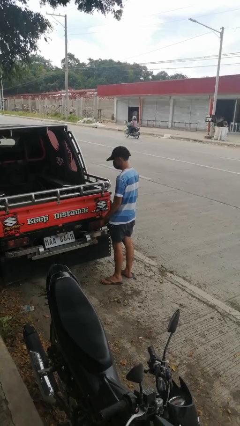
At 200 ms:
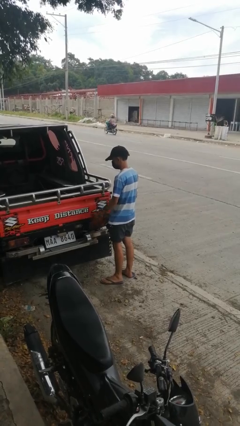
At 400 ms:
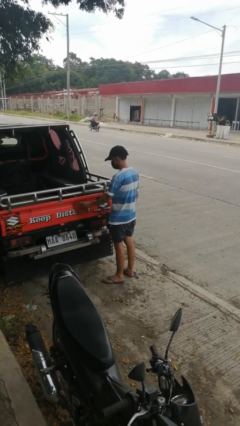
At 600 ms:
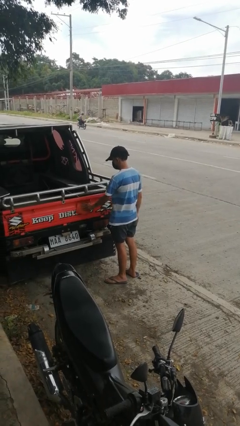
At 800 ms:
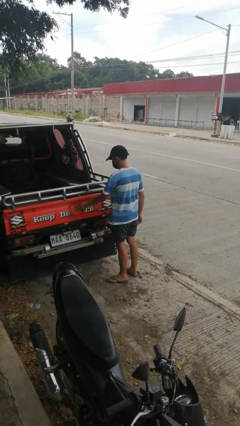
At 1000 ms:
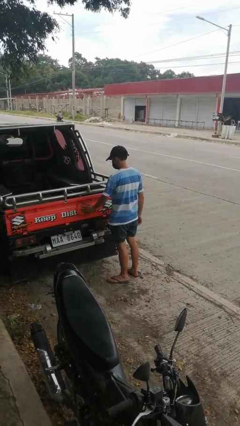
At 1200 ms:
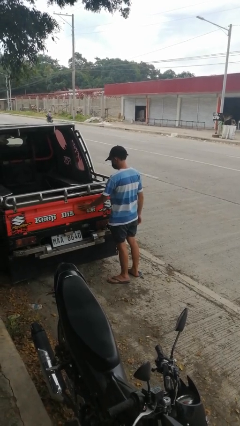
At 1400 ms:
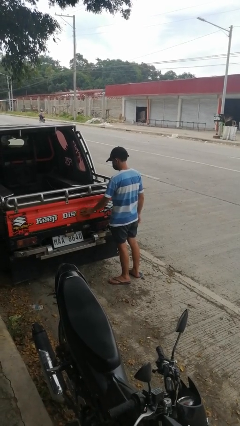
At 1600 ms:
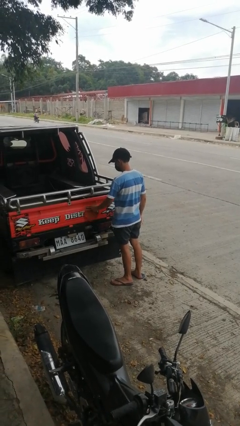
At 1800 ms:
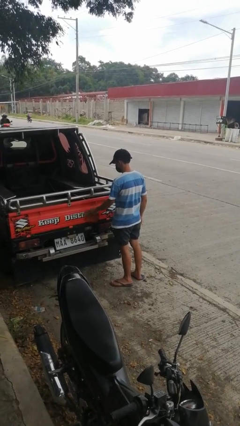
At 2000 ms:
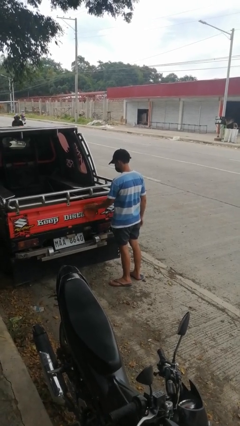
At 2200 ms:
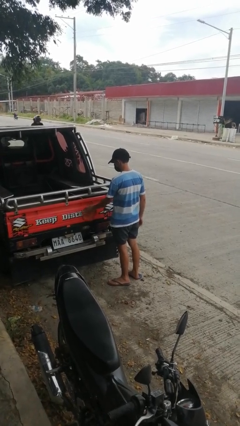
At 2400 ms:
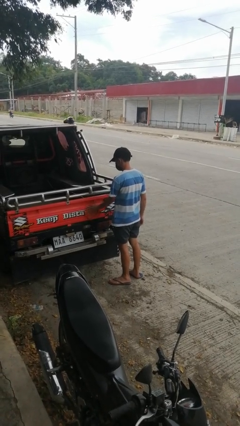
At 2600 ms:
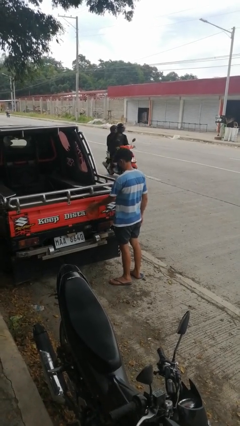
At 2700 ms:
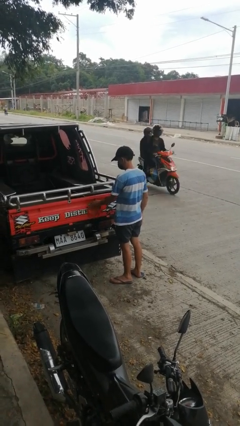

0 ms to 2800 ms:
person polishes car with rag

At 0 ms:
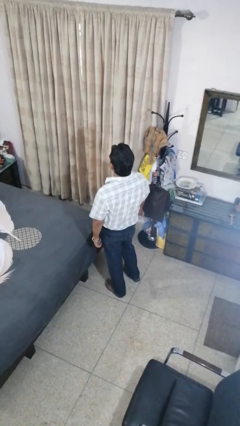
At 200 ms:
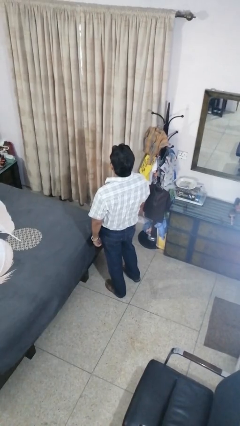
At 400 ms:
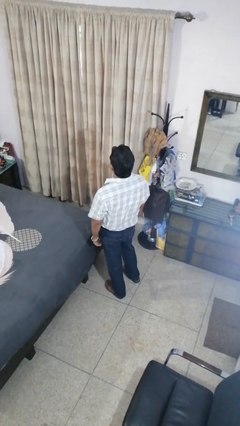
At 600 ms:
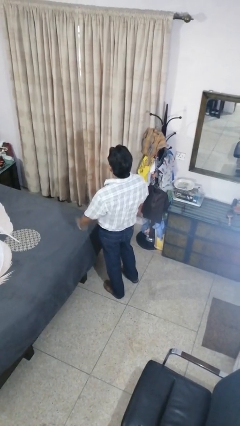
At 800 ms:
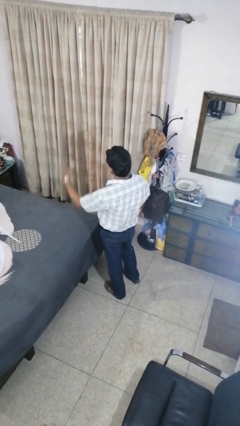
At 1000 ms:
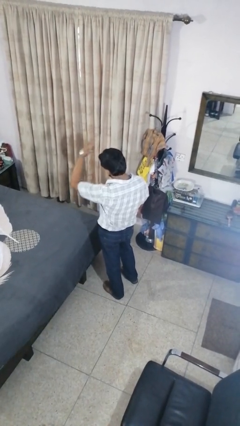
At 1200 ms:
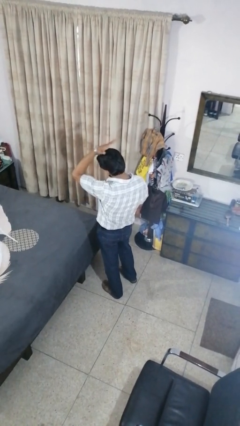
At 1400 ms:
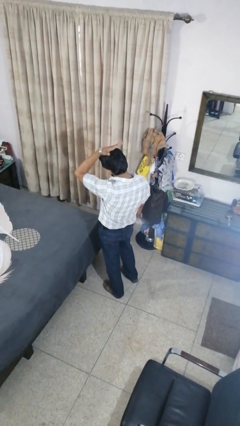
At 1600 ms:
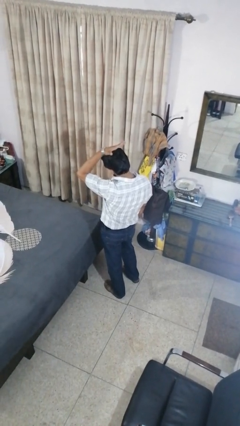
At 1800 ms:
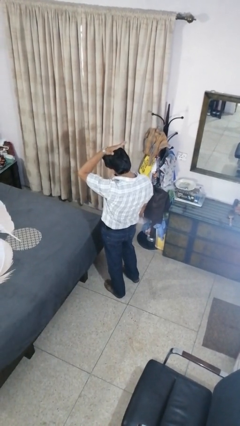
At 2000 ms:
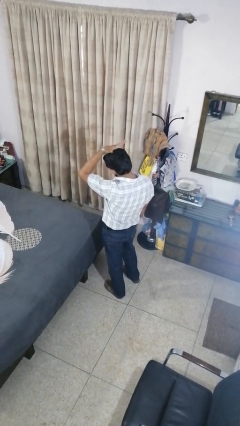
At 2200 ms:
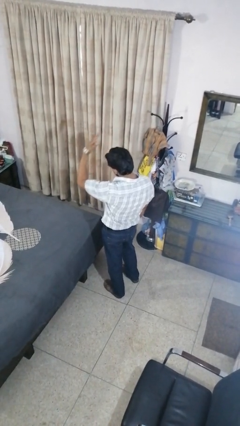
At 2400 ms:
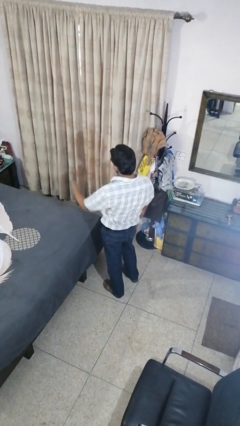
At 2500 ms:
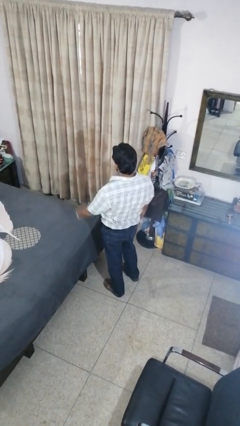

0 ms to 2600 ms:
person pats head

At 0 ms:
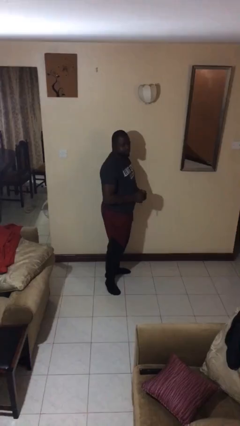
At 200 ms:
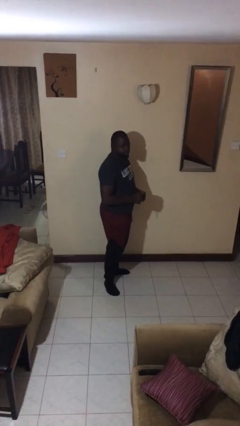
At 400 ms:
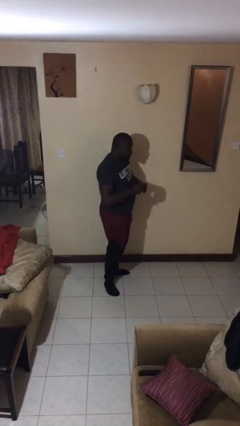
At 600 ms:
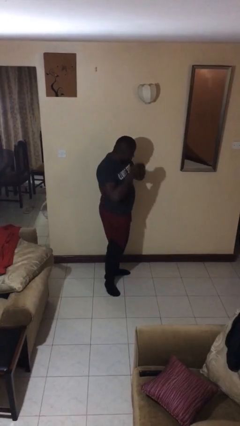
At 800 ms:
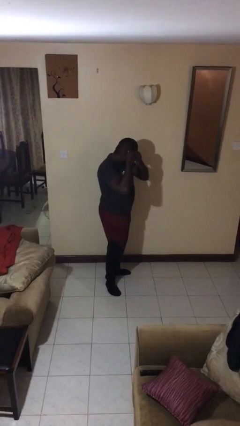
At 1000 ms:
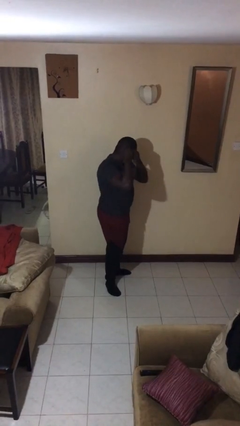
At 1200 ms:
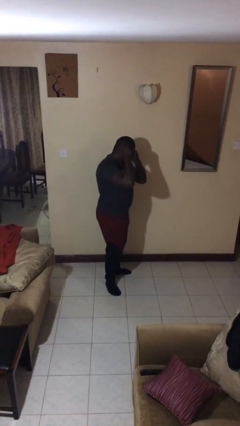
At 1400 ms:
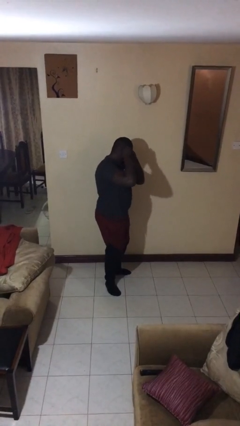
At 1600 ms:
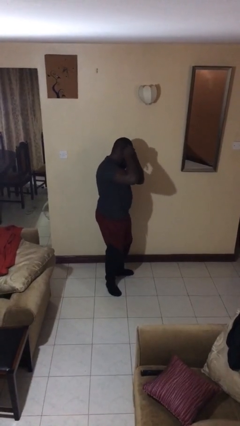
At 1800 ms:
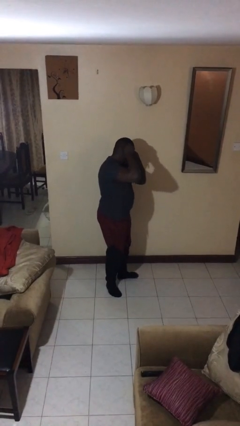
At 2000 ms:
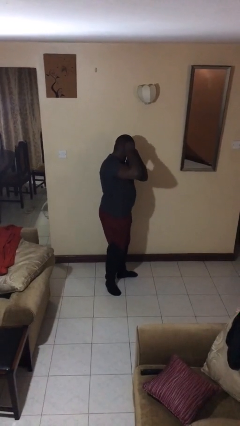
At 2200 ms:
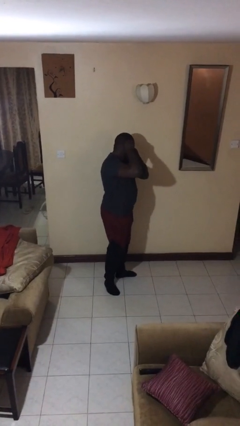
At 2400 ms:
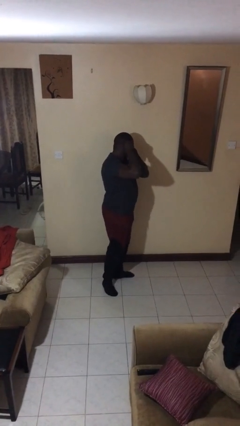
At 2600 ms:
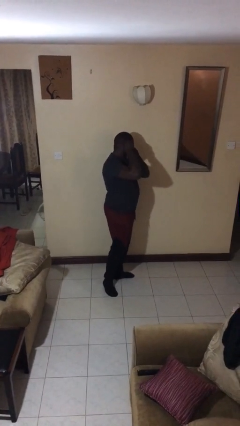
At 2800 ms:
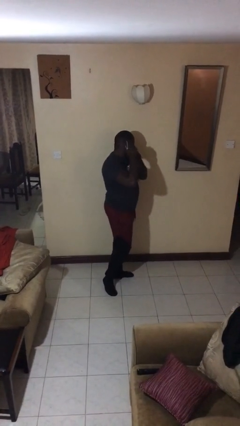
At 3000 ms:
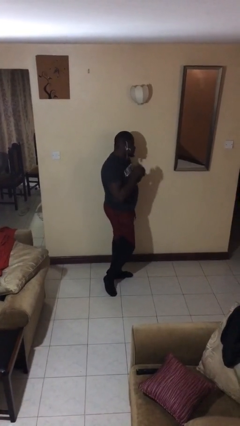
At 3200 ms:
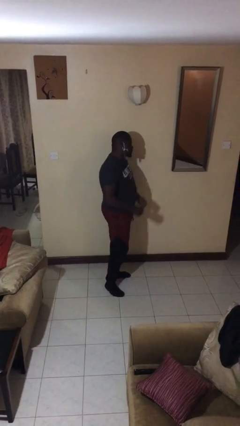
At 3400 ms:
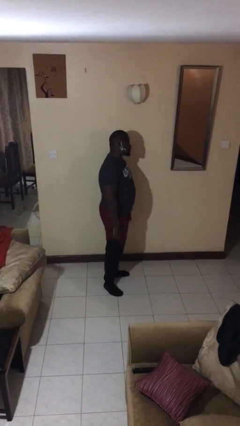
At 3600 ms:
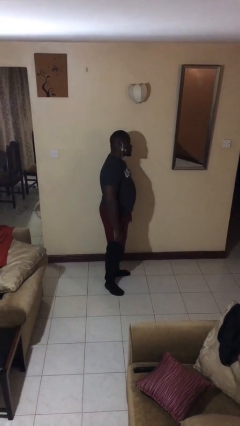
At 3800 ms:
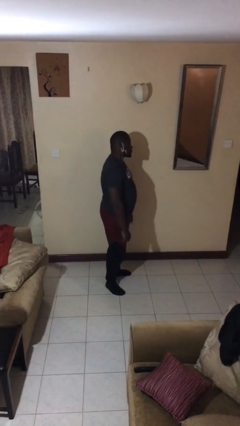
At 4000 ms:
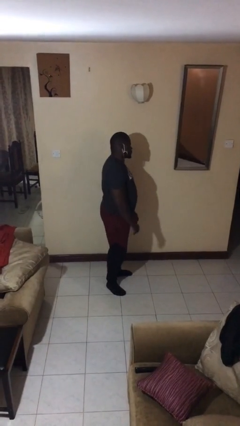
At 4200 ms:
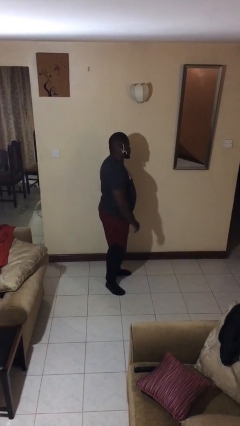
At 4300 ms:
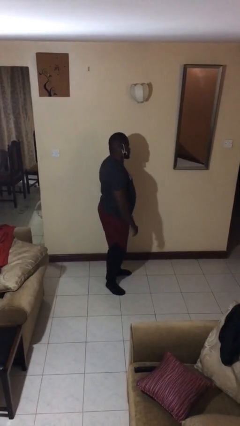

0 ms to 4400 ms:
person puts on earrings

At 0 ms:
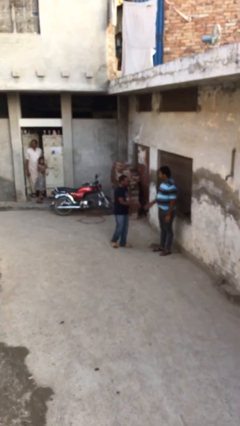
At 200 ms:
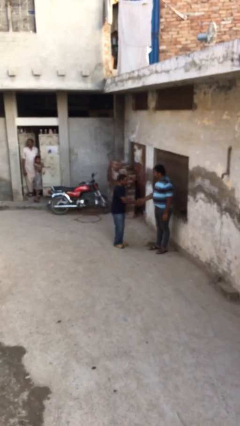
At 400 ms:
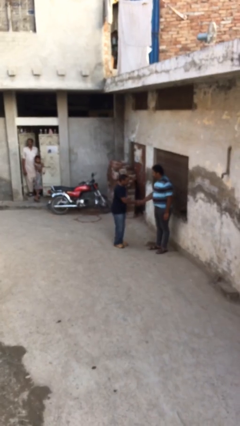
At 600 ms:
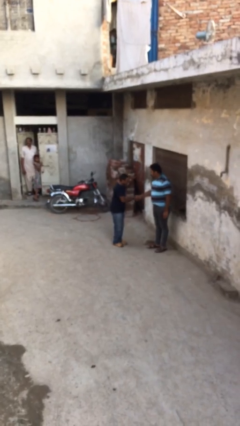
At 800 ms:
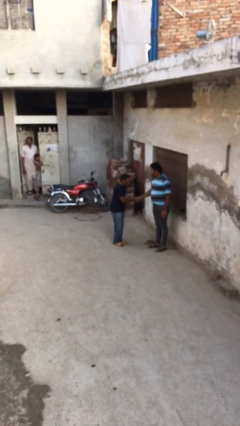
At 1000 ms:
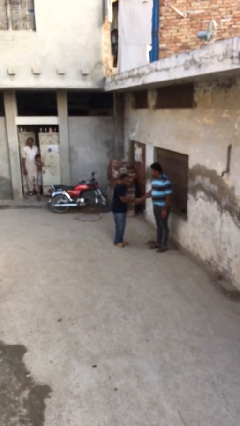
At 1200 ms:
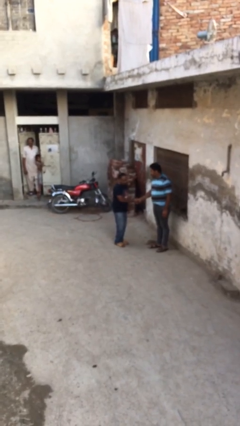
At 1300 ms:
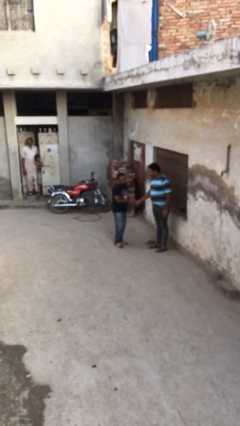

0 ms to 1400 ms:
person shakes hand

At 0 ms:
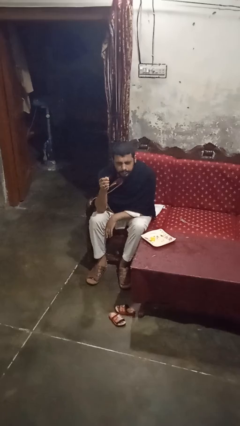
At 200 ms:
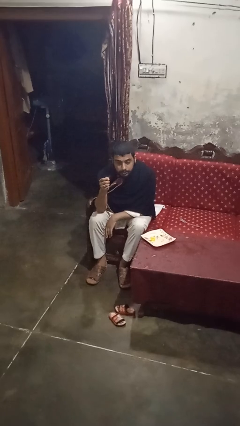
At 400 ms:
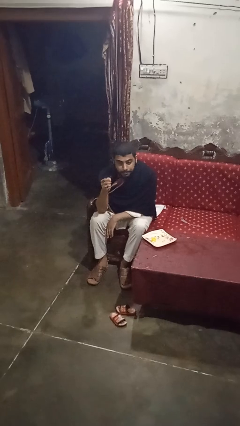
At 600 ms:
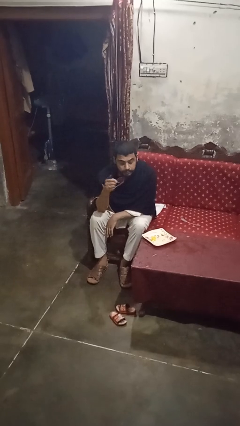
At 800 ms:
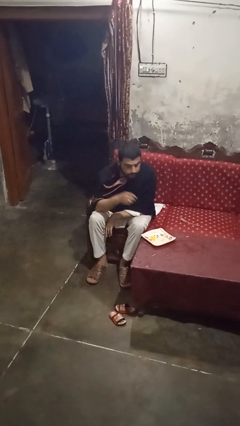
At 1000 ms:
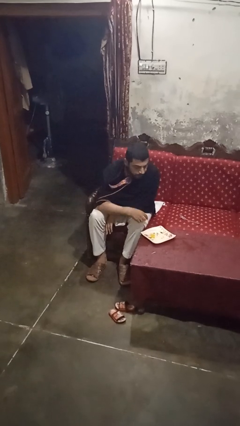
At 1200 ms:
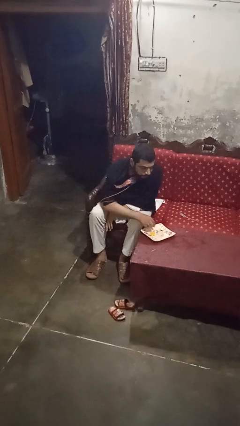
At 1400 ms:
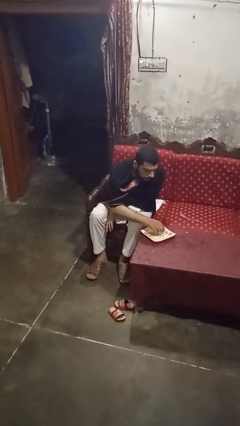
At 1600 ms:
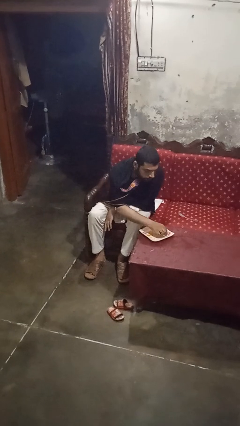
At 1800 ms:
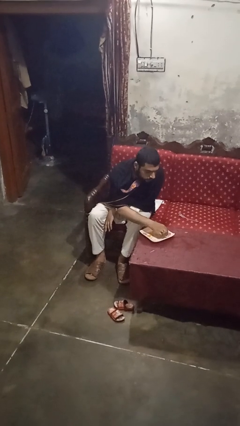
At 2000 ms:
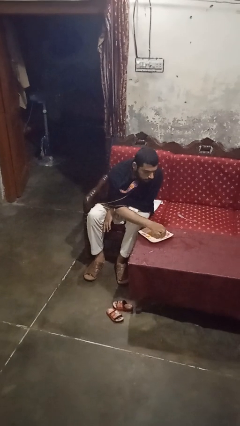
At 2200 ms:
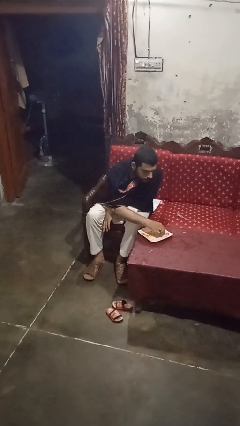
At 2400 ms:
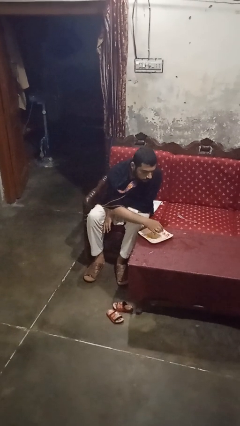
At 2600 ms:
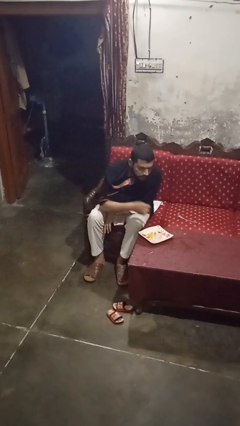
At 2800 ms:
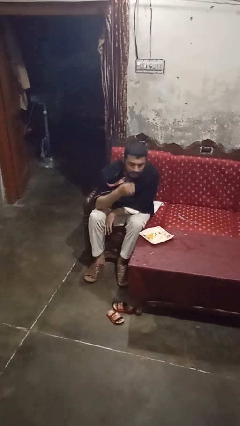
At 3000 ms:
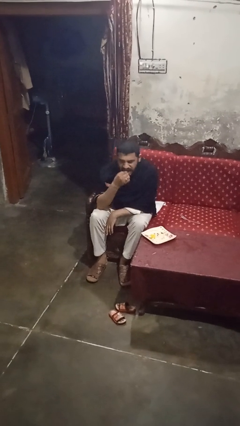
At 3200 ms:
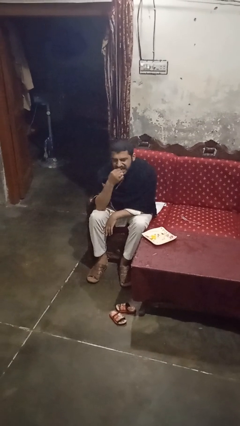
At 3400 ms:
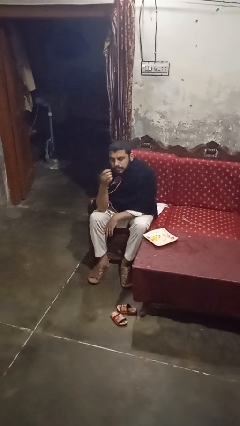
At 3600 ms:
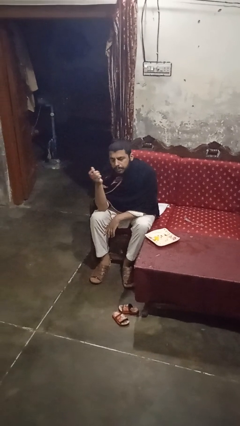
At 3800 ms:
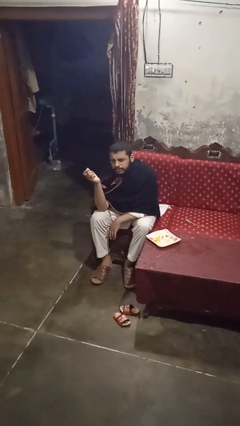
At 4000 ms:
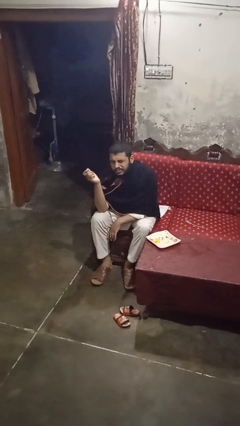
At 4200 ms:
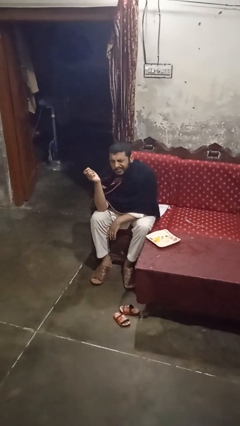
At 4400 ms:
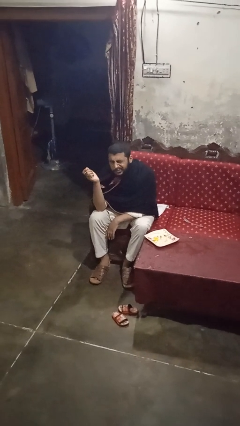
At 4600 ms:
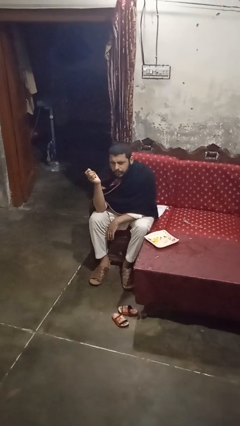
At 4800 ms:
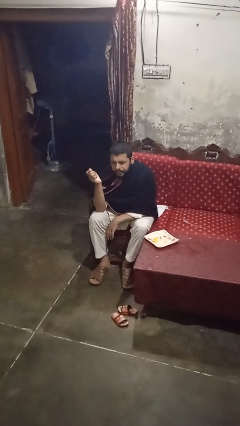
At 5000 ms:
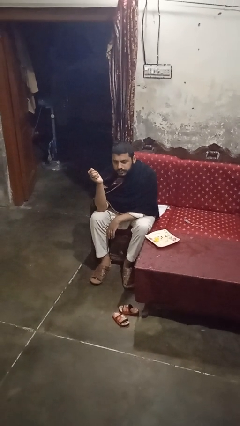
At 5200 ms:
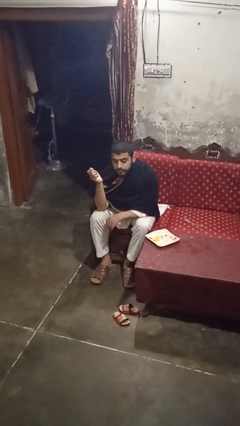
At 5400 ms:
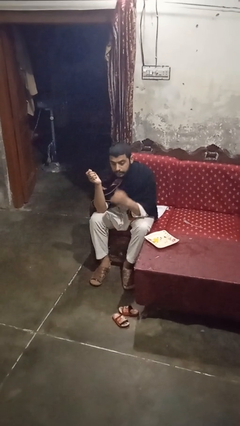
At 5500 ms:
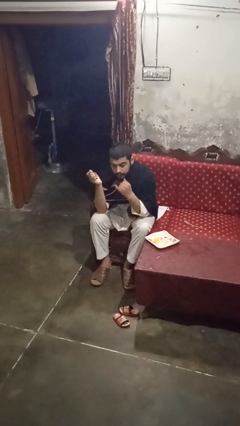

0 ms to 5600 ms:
person eats with hands

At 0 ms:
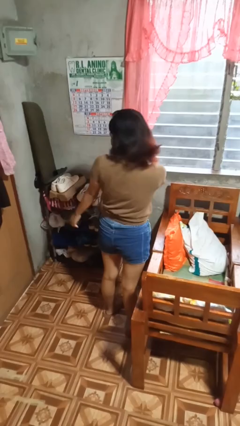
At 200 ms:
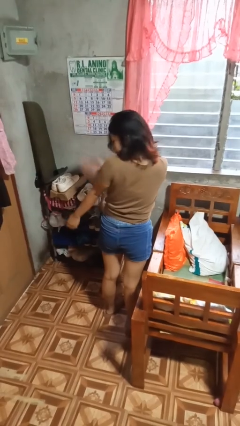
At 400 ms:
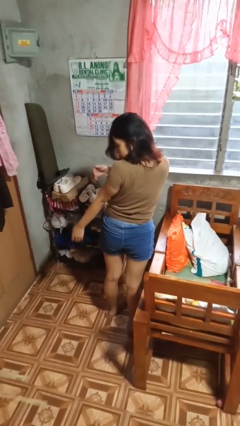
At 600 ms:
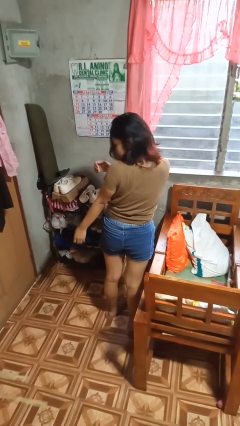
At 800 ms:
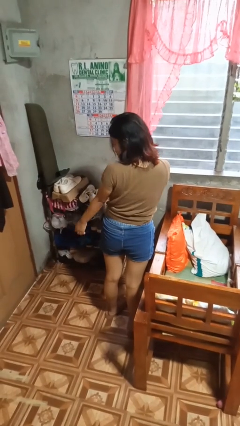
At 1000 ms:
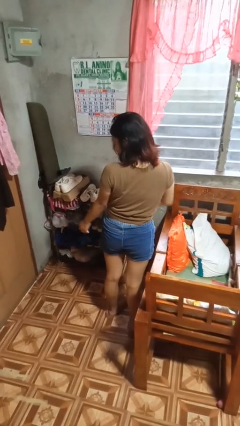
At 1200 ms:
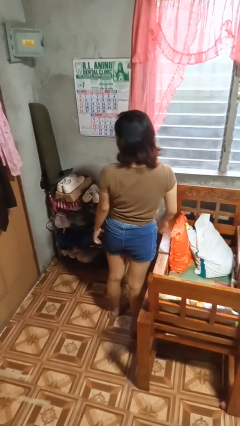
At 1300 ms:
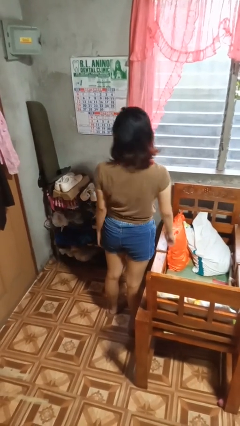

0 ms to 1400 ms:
person swats bug
